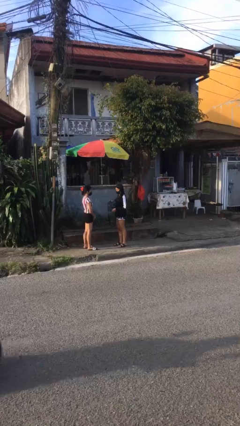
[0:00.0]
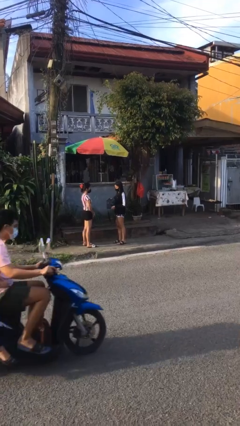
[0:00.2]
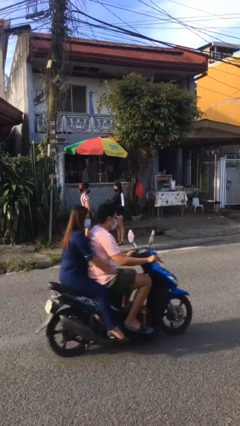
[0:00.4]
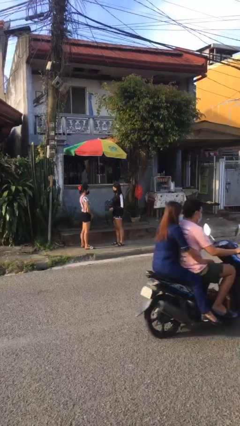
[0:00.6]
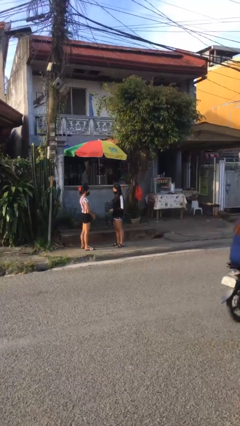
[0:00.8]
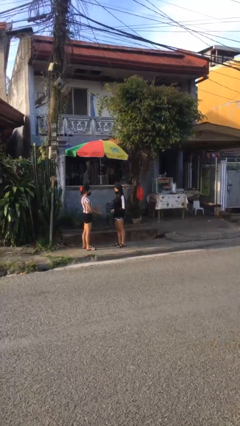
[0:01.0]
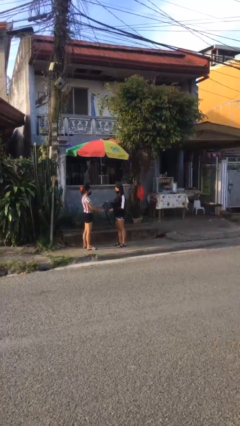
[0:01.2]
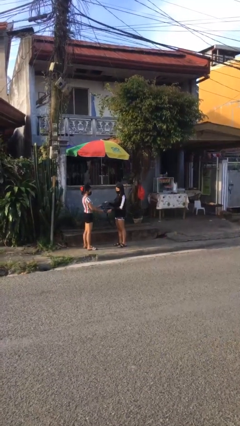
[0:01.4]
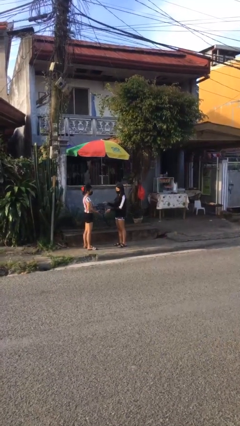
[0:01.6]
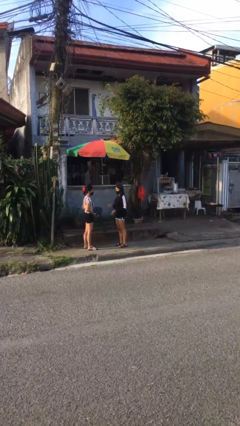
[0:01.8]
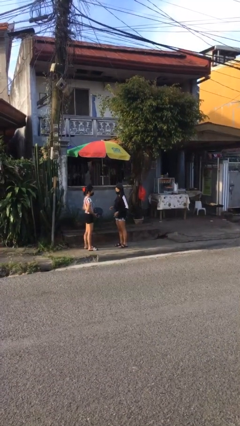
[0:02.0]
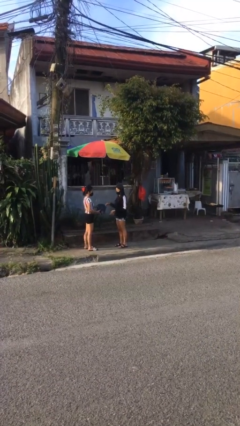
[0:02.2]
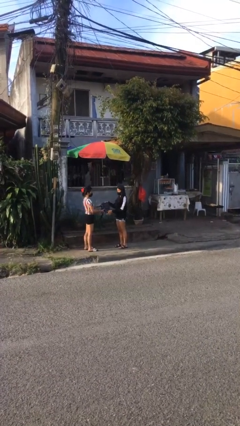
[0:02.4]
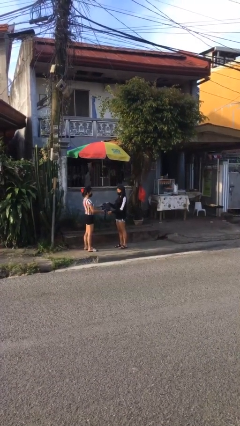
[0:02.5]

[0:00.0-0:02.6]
person transfers object to person

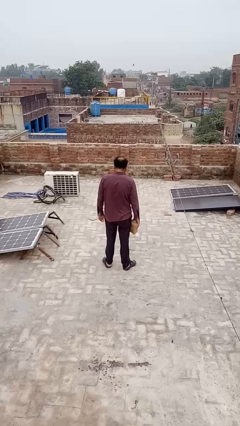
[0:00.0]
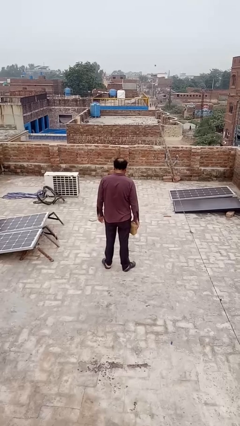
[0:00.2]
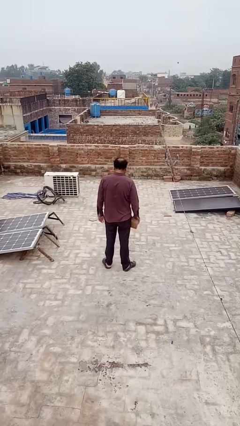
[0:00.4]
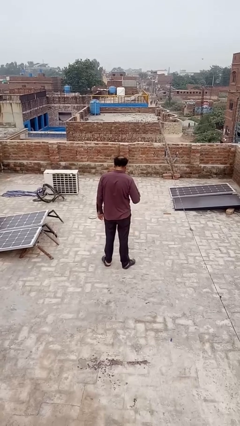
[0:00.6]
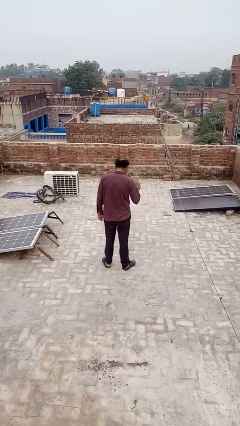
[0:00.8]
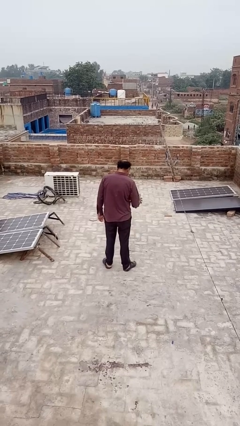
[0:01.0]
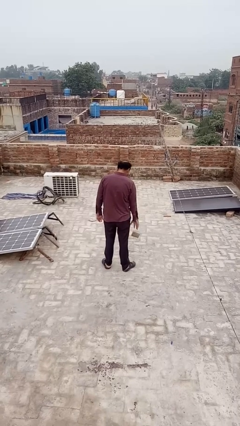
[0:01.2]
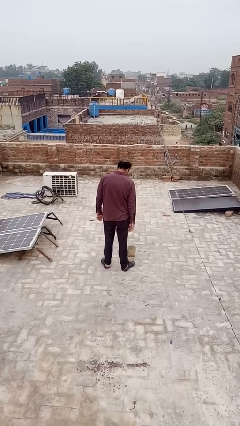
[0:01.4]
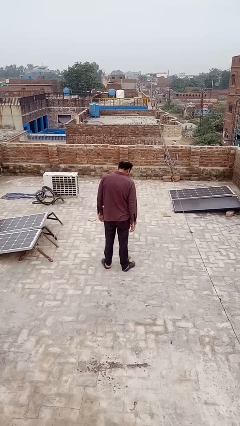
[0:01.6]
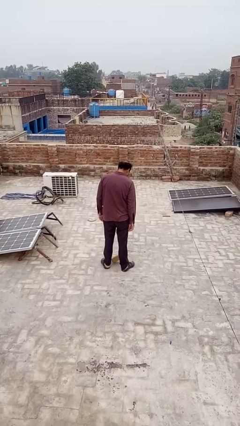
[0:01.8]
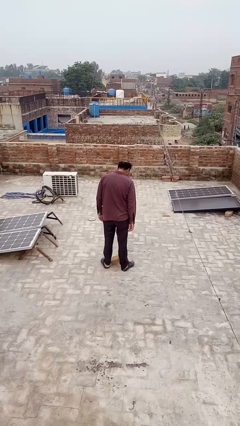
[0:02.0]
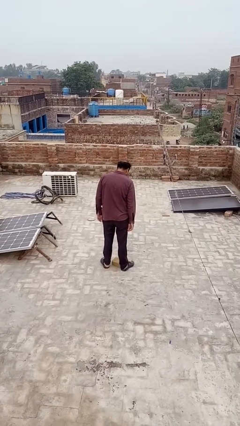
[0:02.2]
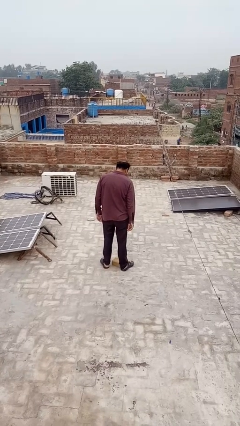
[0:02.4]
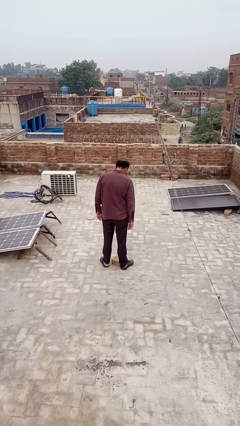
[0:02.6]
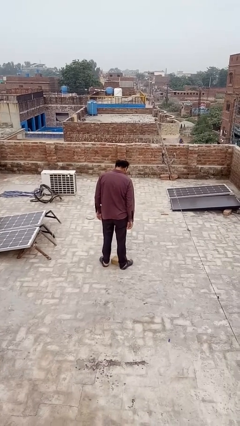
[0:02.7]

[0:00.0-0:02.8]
person throws object to ground

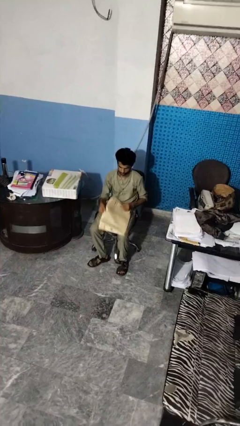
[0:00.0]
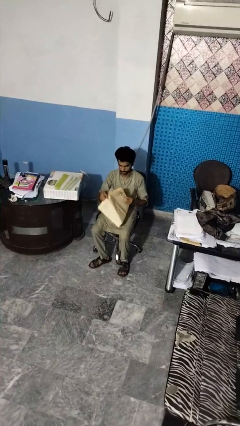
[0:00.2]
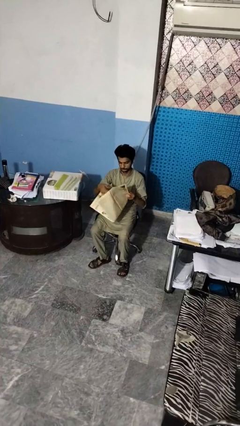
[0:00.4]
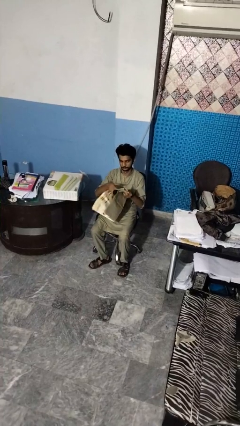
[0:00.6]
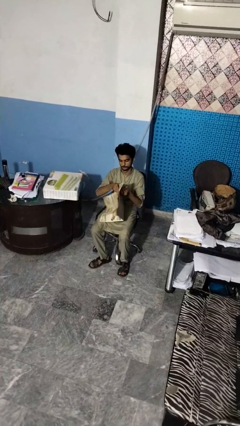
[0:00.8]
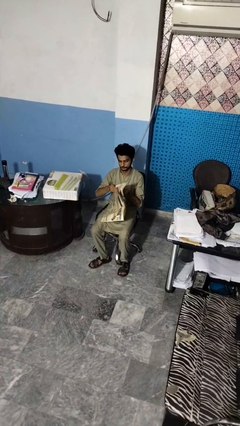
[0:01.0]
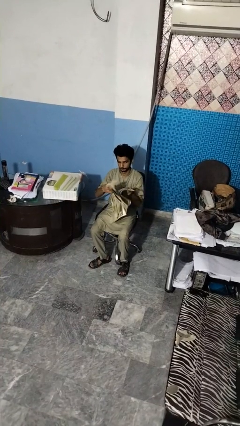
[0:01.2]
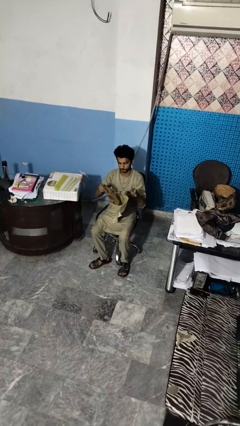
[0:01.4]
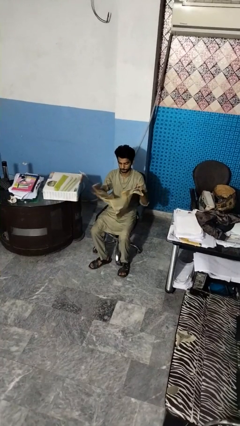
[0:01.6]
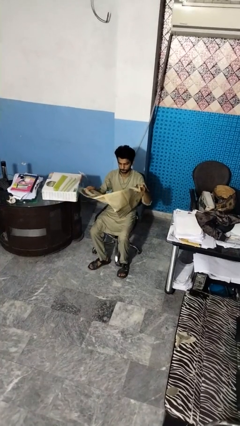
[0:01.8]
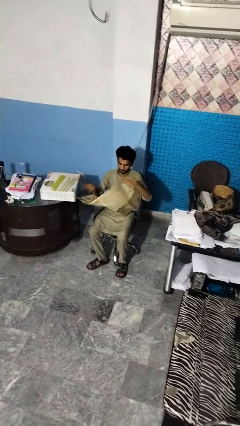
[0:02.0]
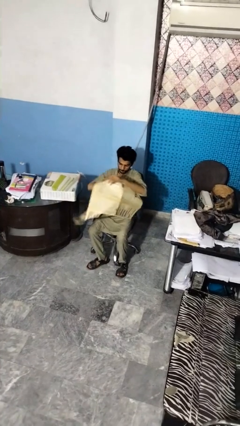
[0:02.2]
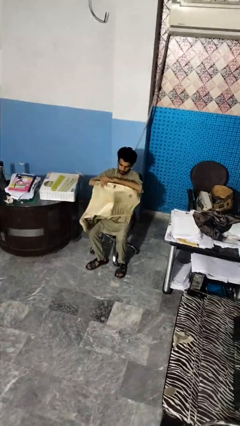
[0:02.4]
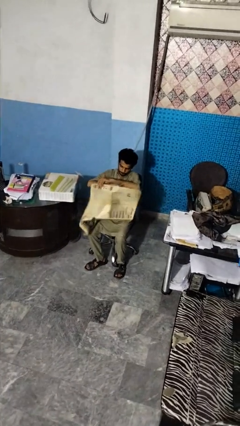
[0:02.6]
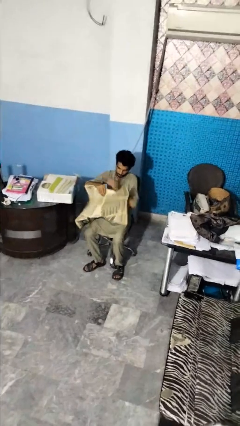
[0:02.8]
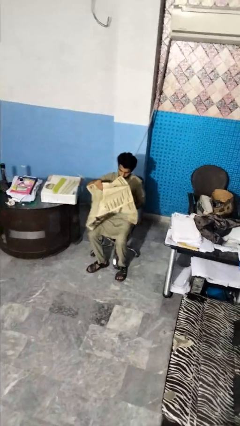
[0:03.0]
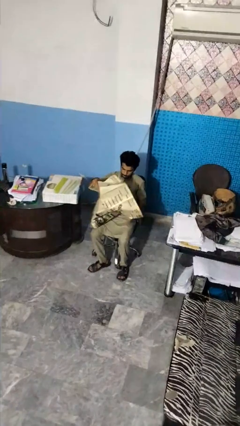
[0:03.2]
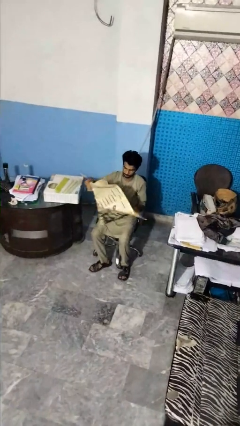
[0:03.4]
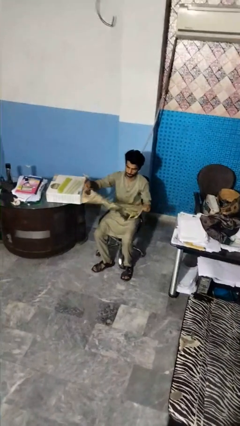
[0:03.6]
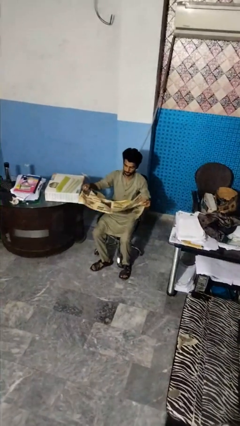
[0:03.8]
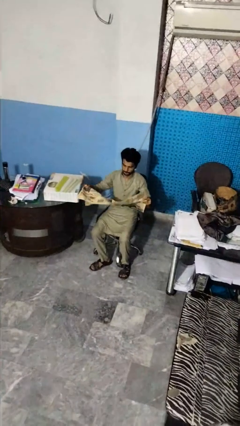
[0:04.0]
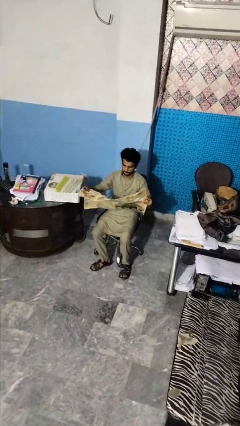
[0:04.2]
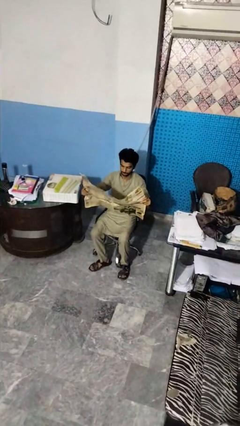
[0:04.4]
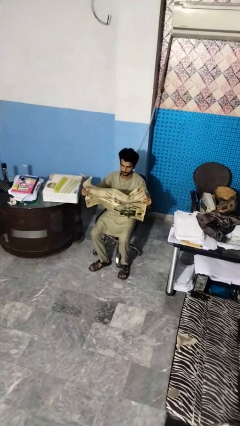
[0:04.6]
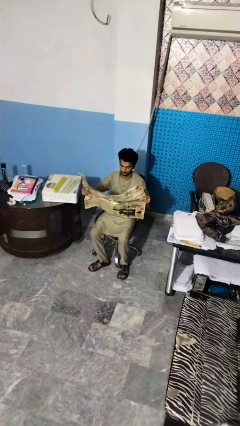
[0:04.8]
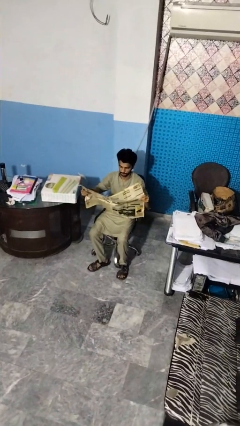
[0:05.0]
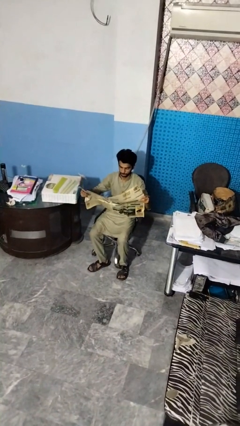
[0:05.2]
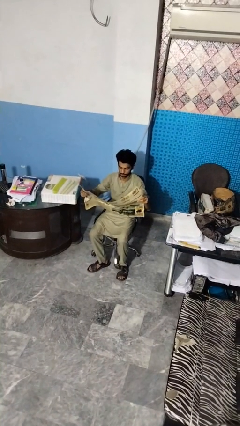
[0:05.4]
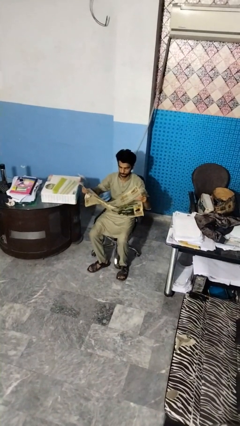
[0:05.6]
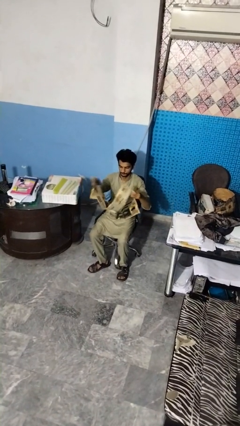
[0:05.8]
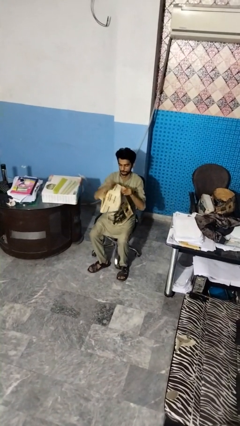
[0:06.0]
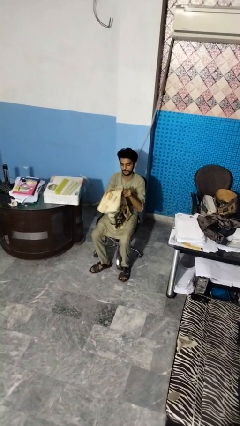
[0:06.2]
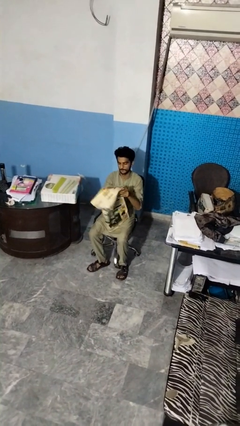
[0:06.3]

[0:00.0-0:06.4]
person reads newspaper

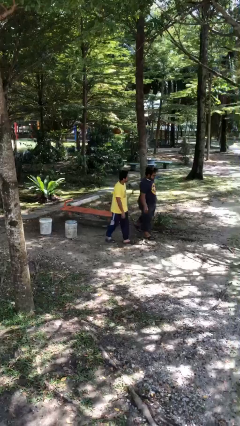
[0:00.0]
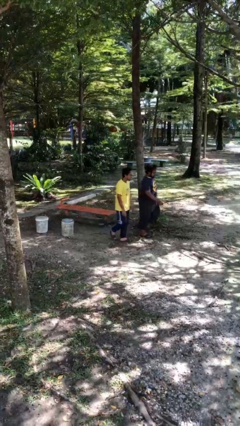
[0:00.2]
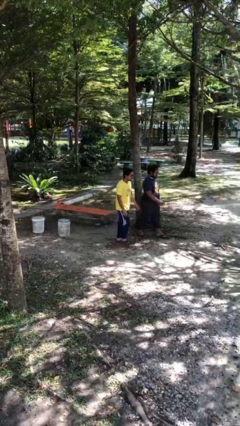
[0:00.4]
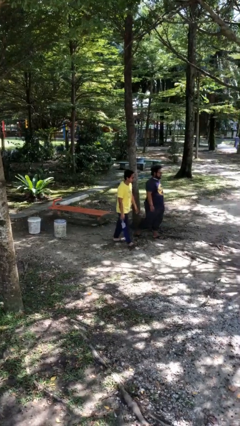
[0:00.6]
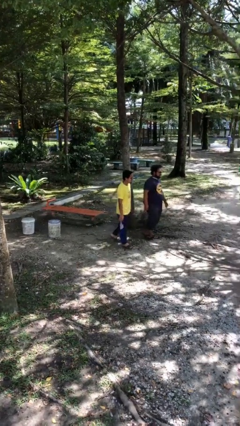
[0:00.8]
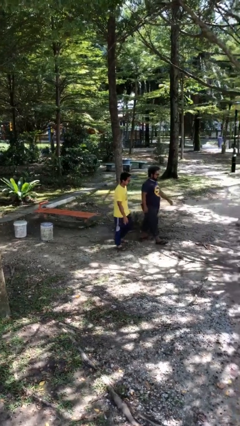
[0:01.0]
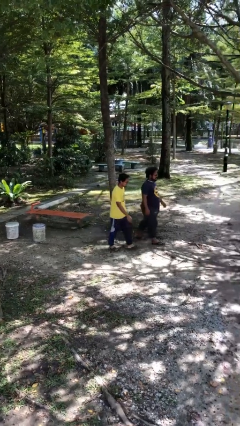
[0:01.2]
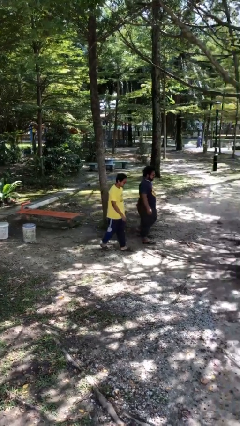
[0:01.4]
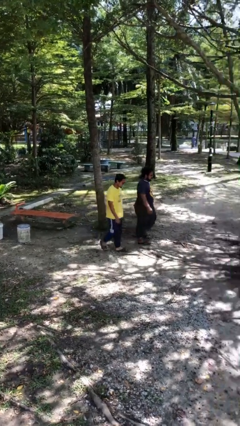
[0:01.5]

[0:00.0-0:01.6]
person talks to person

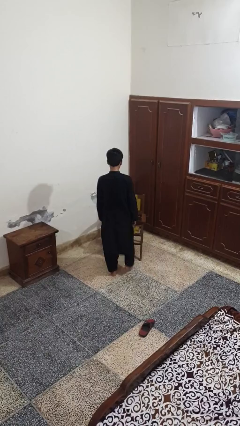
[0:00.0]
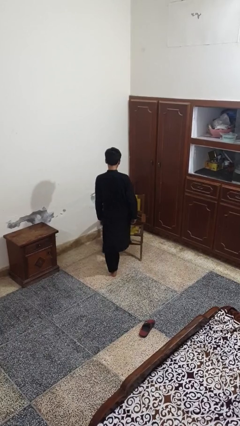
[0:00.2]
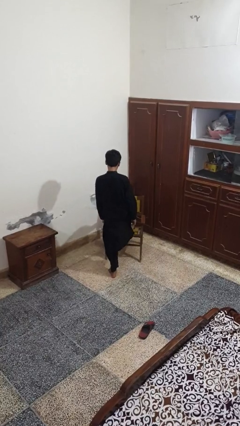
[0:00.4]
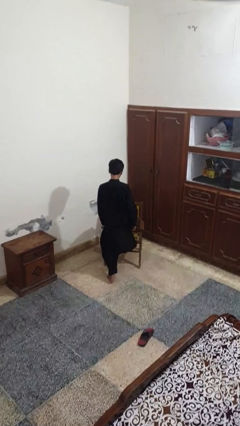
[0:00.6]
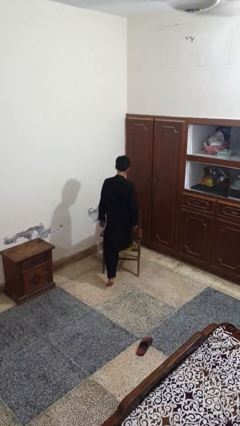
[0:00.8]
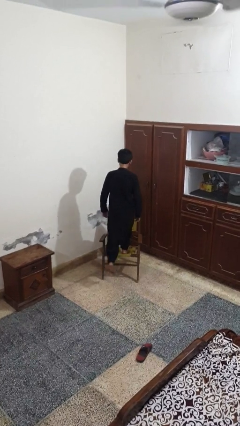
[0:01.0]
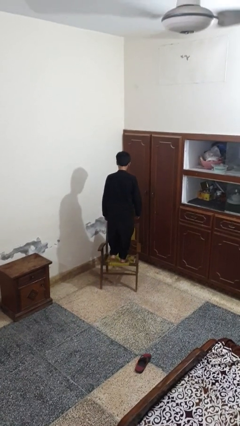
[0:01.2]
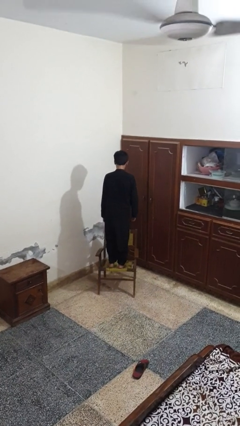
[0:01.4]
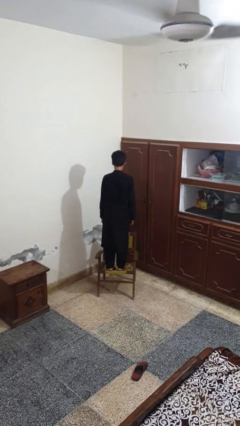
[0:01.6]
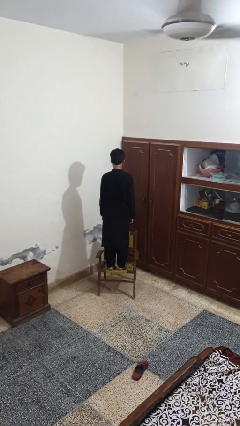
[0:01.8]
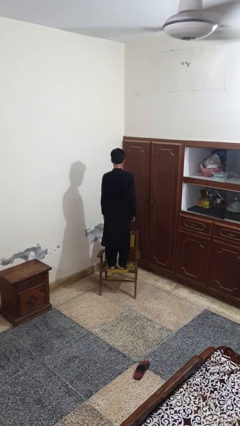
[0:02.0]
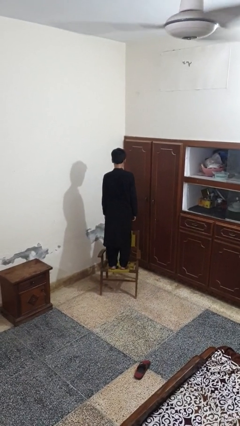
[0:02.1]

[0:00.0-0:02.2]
person climbs on chair

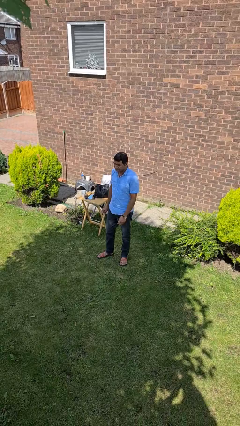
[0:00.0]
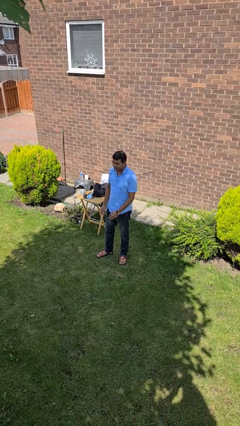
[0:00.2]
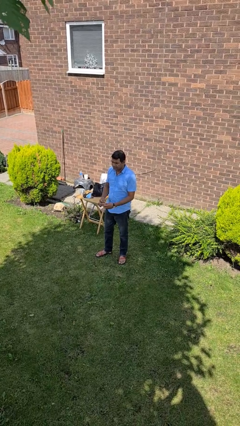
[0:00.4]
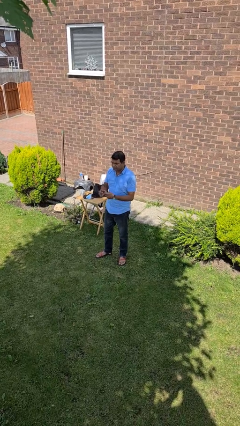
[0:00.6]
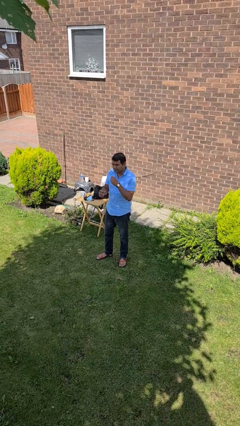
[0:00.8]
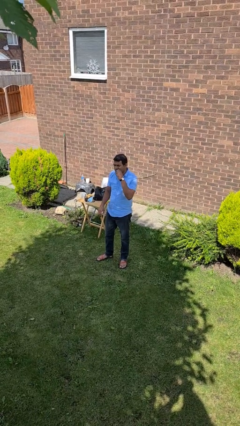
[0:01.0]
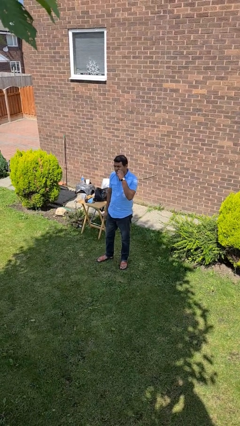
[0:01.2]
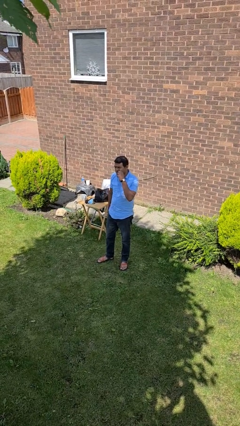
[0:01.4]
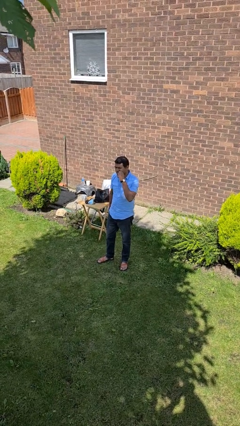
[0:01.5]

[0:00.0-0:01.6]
person flosses

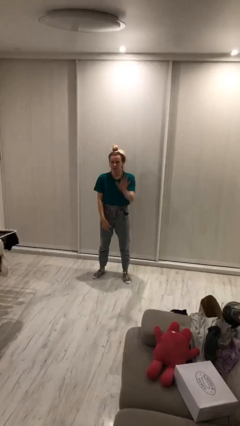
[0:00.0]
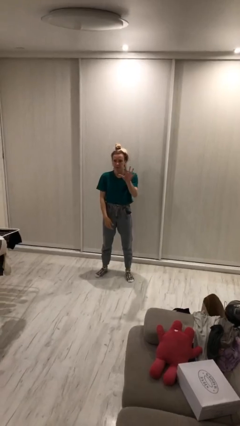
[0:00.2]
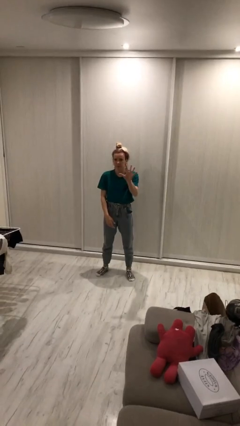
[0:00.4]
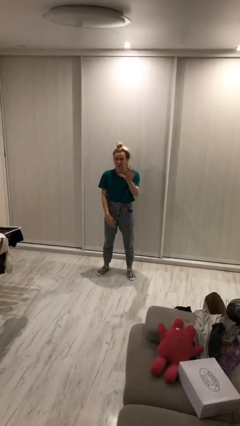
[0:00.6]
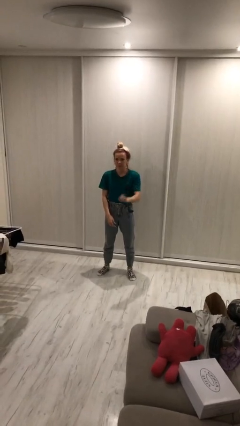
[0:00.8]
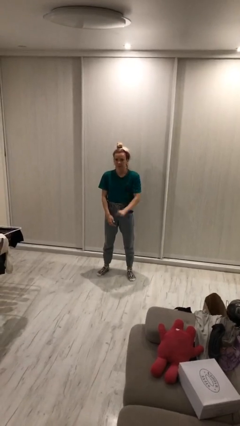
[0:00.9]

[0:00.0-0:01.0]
person gestures number five
